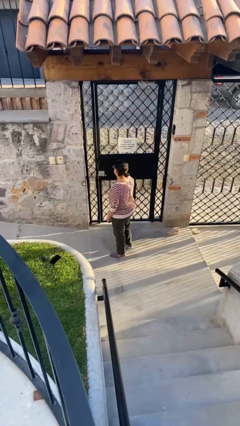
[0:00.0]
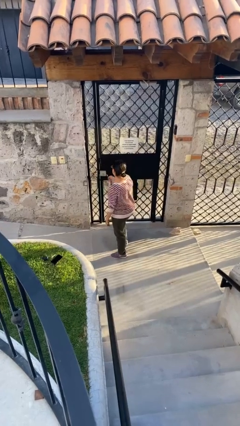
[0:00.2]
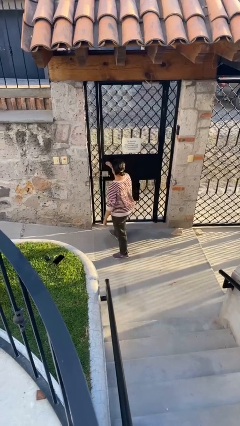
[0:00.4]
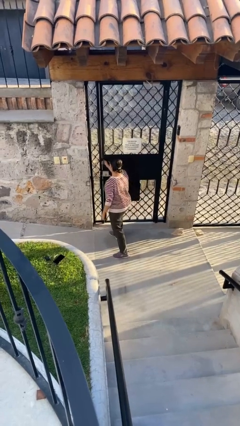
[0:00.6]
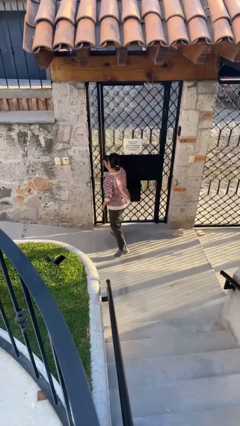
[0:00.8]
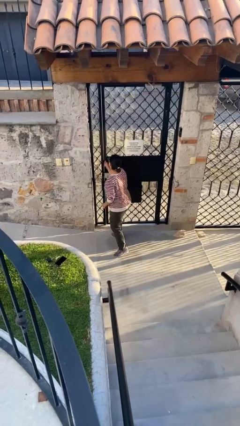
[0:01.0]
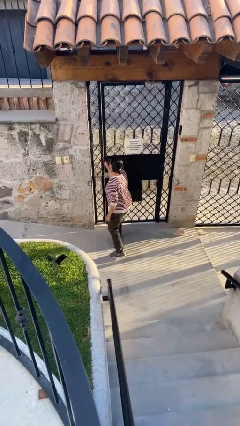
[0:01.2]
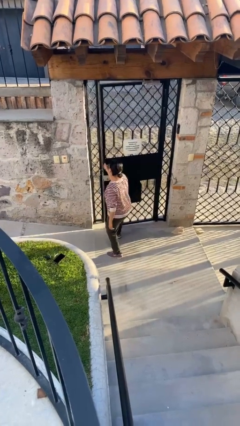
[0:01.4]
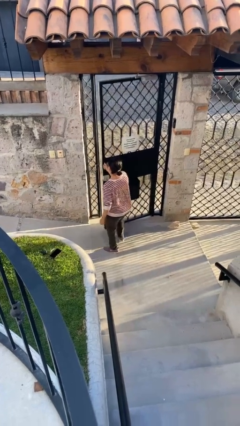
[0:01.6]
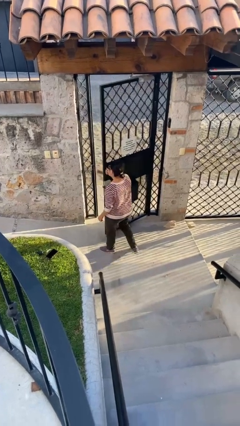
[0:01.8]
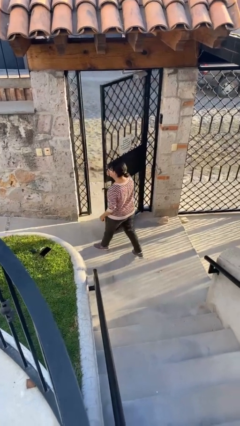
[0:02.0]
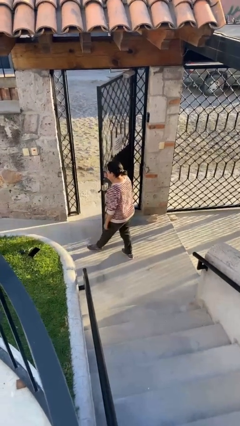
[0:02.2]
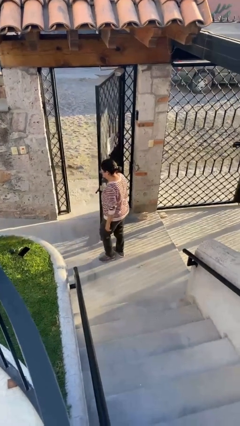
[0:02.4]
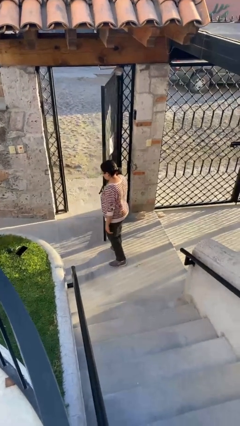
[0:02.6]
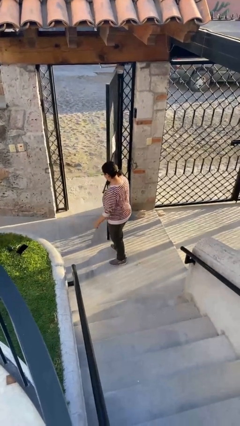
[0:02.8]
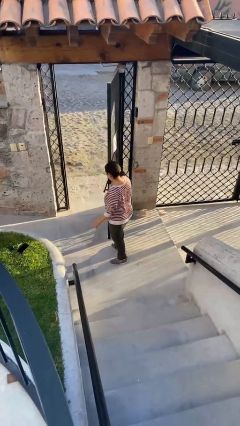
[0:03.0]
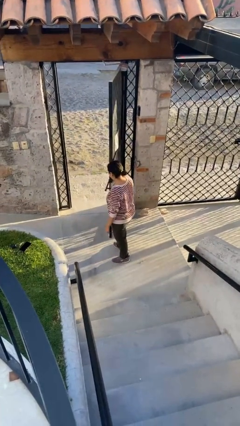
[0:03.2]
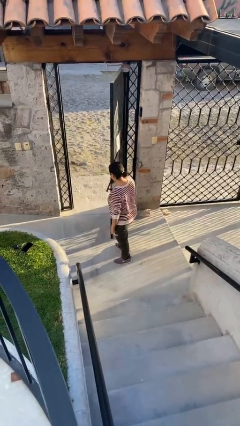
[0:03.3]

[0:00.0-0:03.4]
person opens facility door

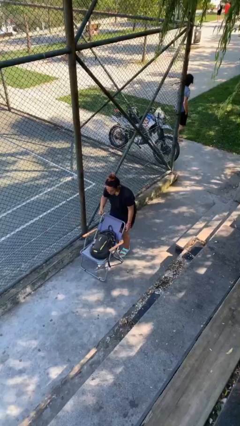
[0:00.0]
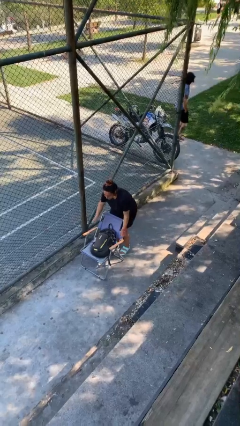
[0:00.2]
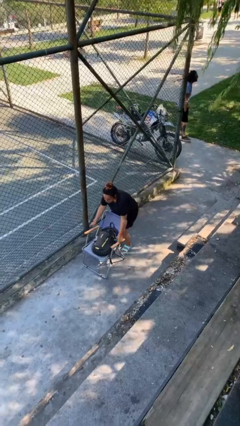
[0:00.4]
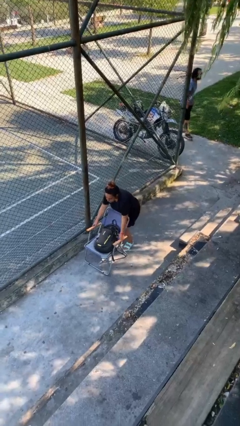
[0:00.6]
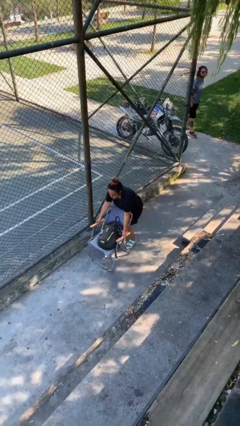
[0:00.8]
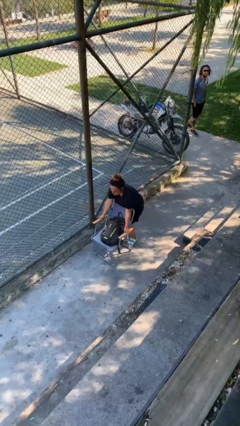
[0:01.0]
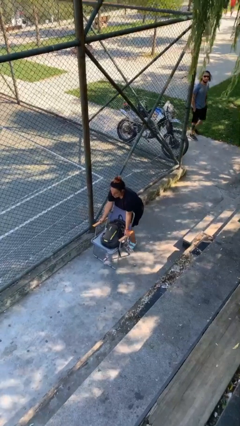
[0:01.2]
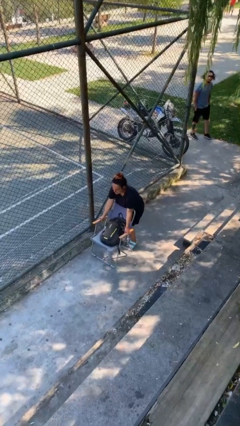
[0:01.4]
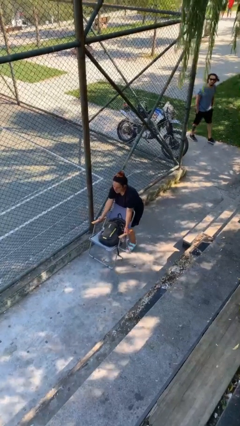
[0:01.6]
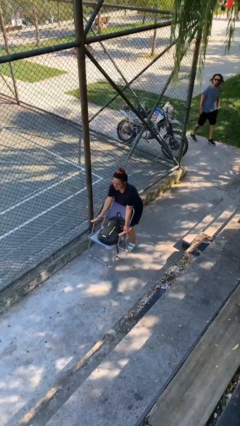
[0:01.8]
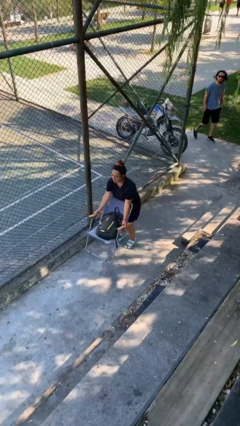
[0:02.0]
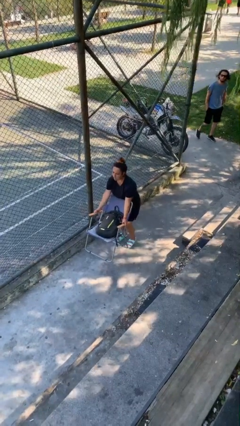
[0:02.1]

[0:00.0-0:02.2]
person picks up object from floor

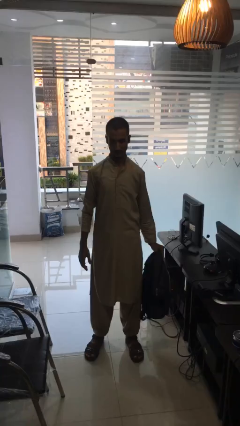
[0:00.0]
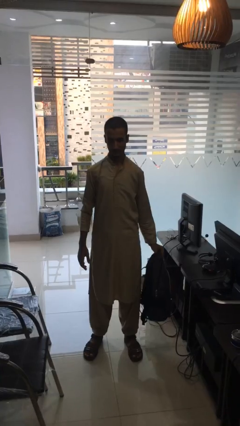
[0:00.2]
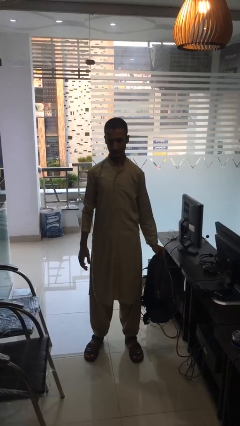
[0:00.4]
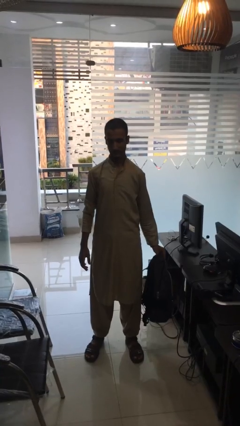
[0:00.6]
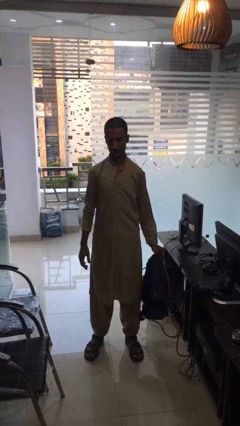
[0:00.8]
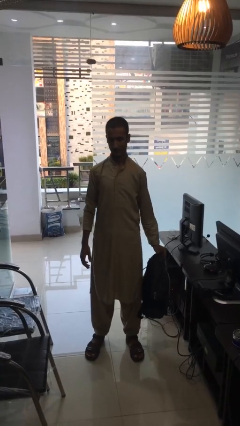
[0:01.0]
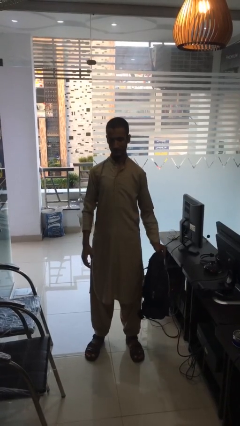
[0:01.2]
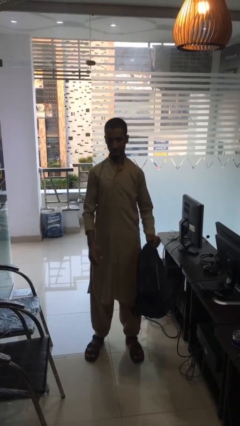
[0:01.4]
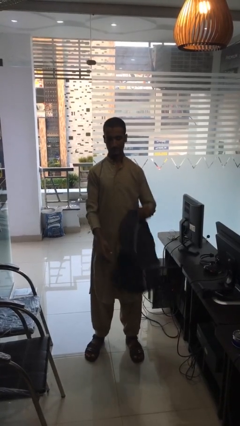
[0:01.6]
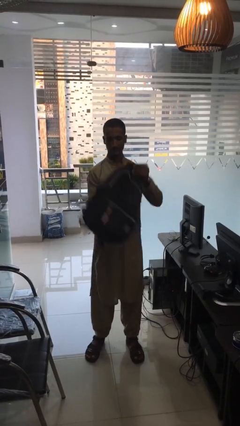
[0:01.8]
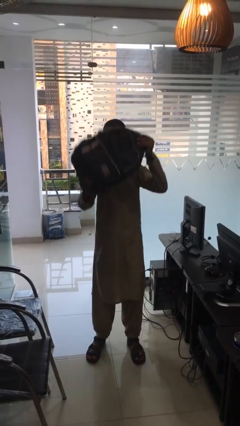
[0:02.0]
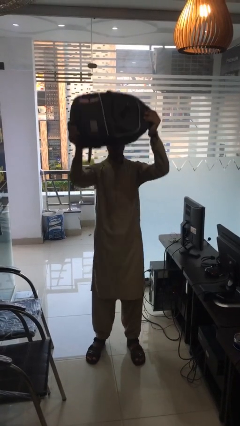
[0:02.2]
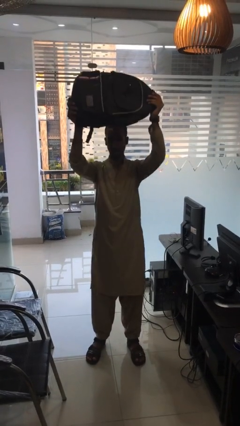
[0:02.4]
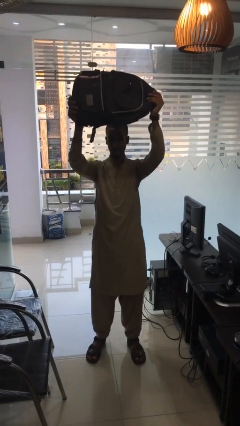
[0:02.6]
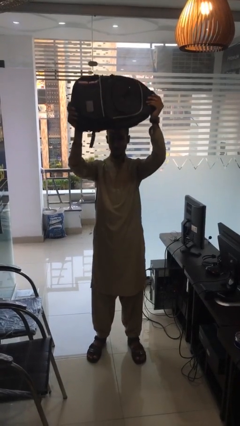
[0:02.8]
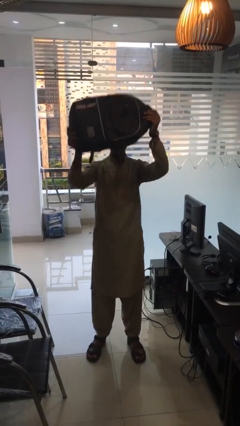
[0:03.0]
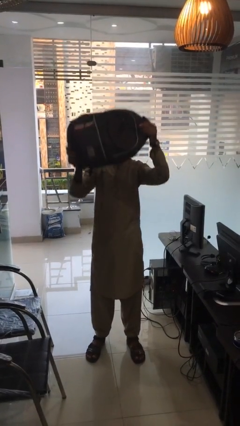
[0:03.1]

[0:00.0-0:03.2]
person holds object above head

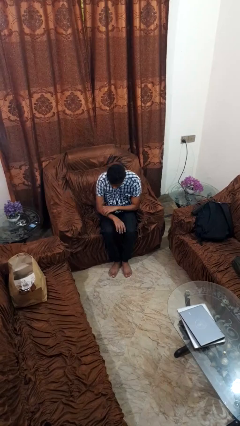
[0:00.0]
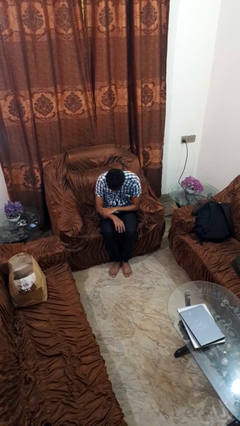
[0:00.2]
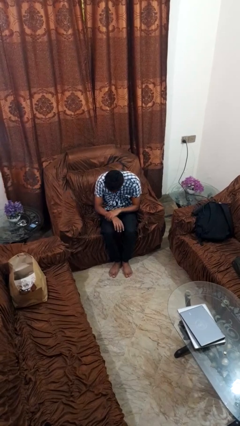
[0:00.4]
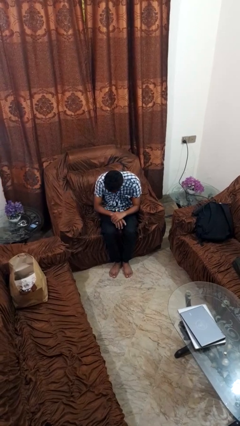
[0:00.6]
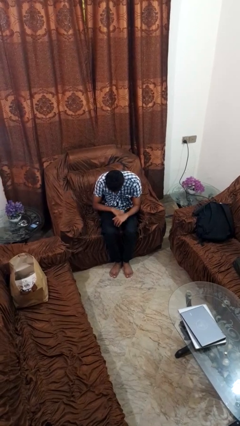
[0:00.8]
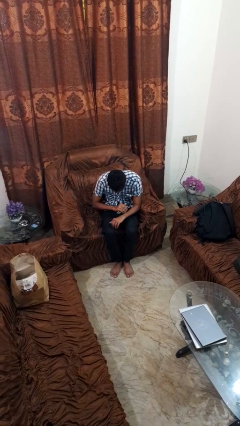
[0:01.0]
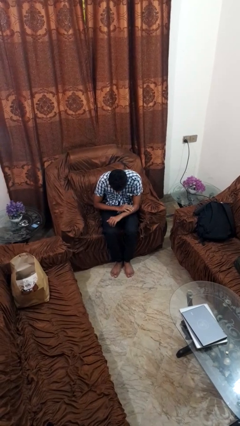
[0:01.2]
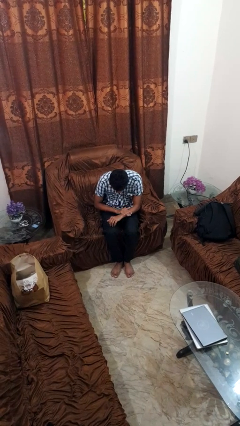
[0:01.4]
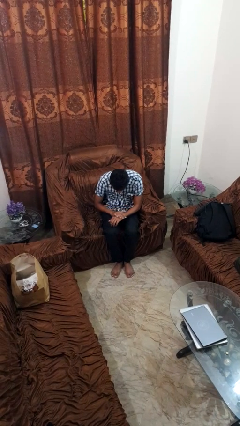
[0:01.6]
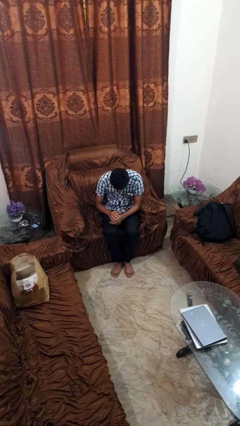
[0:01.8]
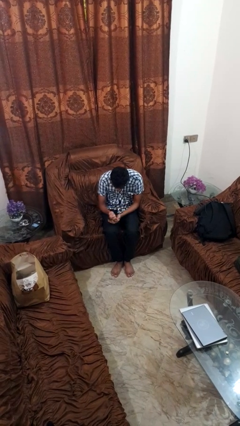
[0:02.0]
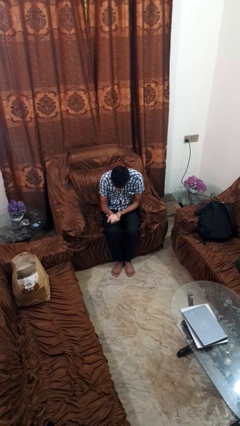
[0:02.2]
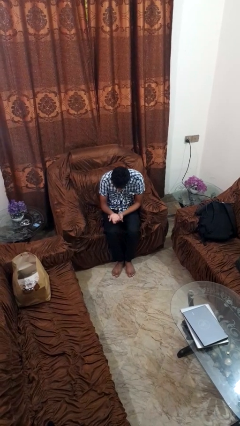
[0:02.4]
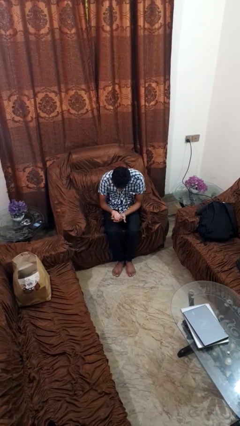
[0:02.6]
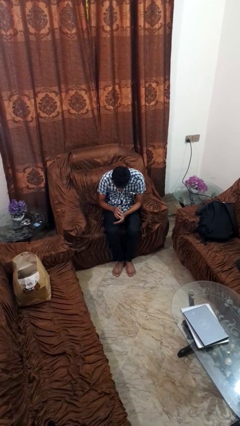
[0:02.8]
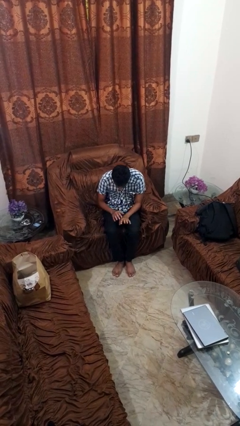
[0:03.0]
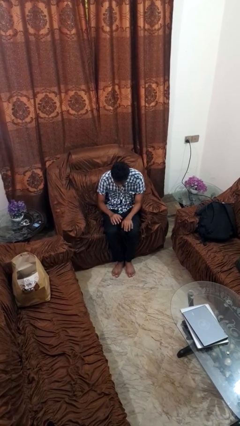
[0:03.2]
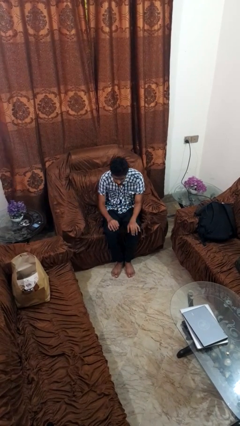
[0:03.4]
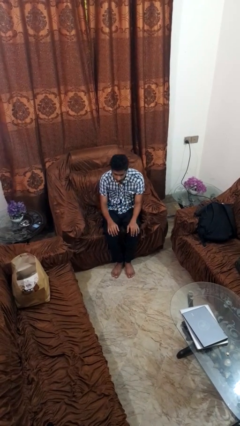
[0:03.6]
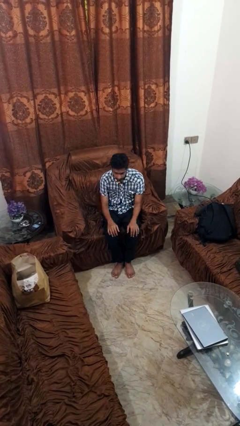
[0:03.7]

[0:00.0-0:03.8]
person looks at hands in lap

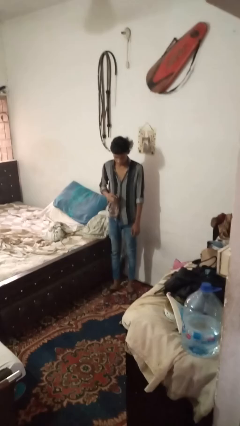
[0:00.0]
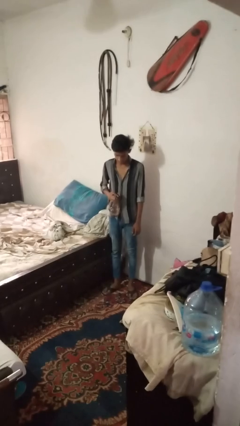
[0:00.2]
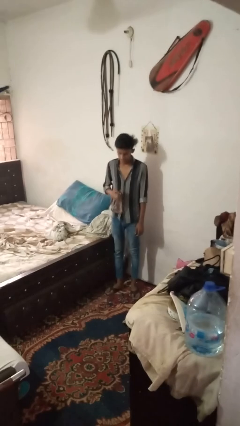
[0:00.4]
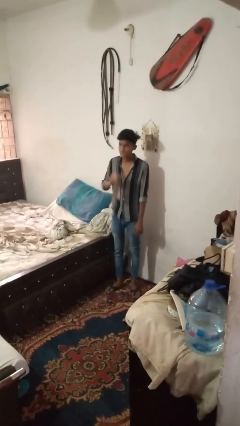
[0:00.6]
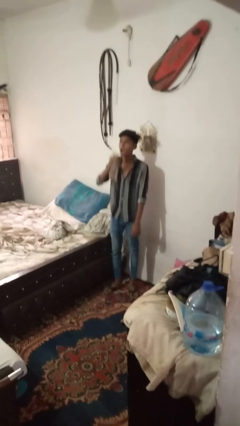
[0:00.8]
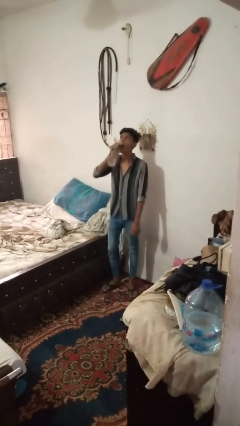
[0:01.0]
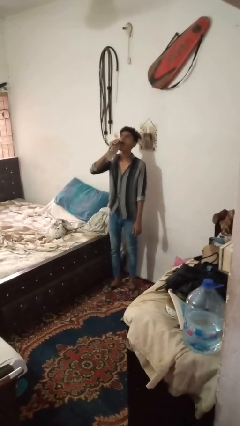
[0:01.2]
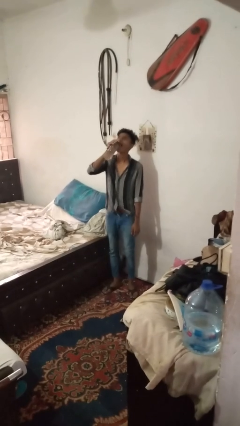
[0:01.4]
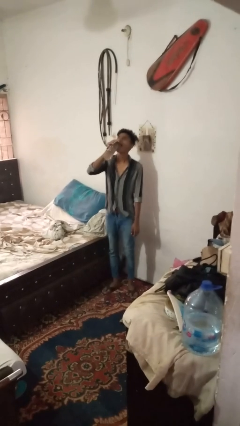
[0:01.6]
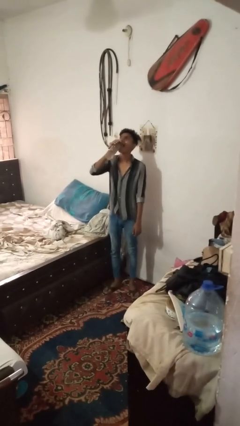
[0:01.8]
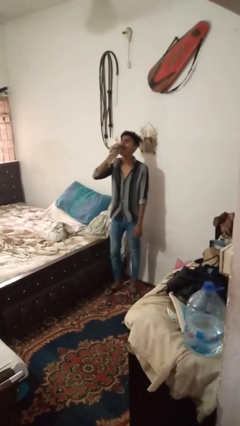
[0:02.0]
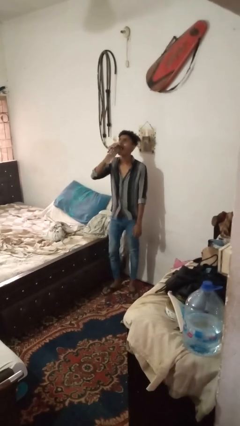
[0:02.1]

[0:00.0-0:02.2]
person drinks from bottle

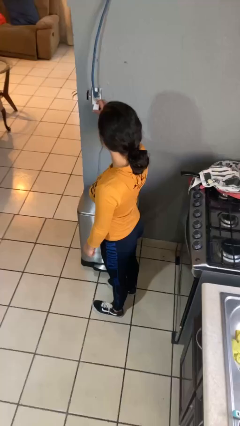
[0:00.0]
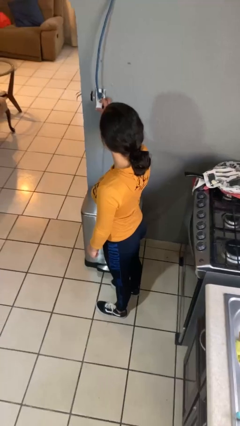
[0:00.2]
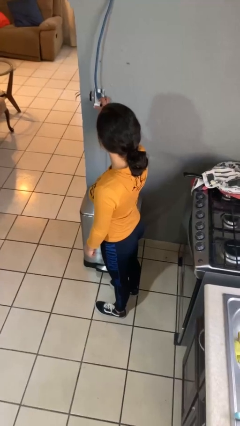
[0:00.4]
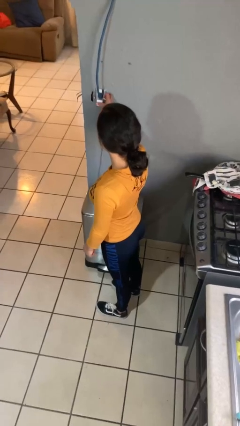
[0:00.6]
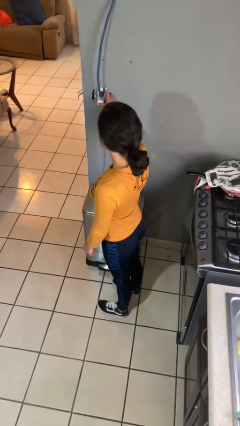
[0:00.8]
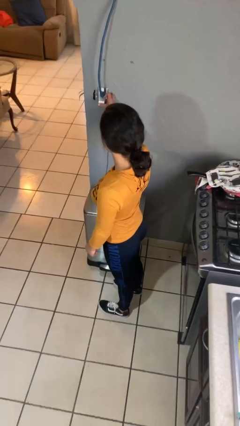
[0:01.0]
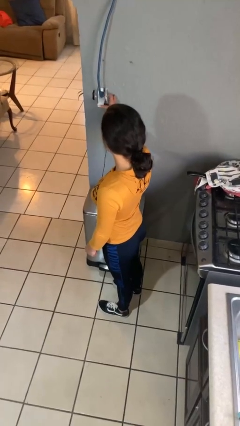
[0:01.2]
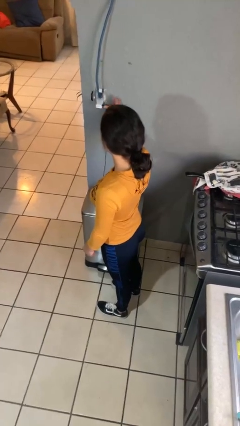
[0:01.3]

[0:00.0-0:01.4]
person plugs into electrical socket

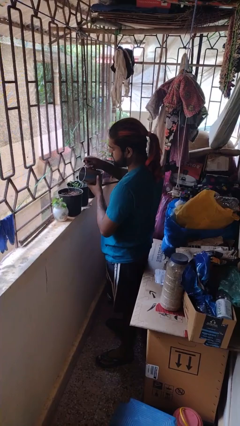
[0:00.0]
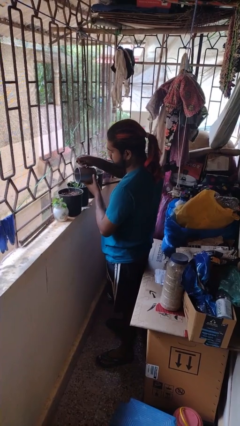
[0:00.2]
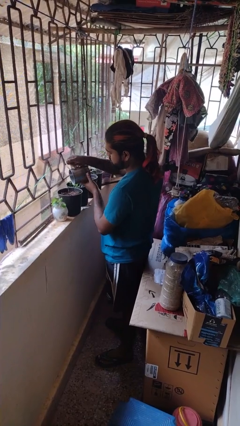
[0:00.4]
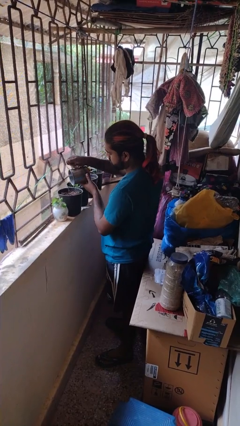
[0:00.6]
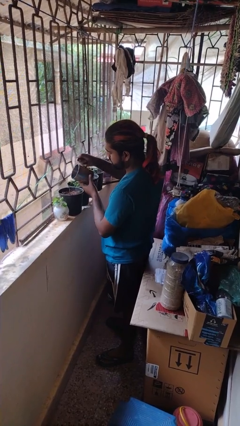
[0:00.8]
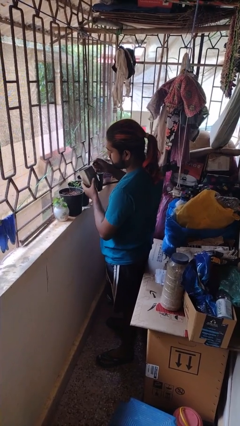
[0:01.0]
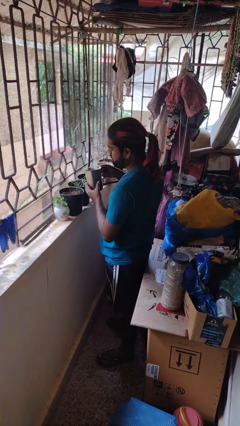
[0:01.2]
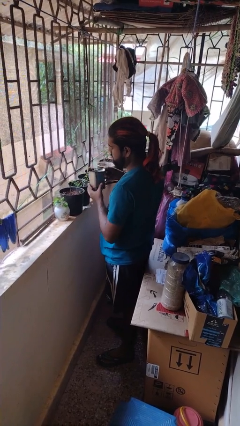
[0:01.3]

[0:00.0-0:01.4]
person waters houseplant
